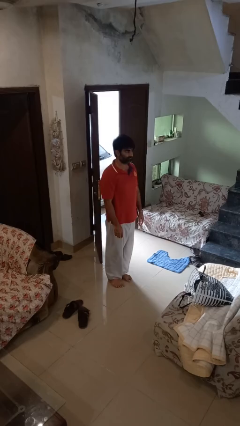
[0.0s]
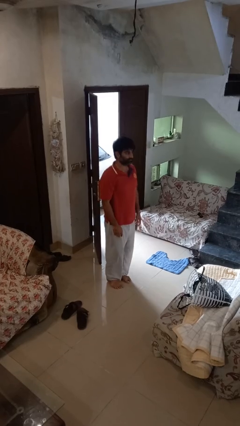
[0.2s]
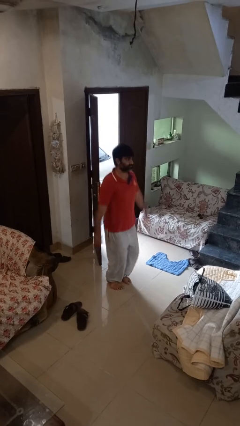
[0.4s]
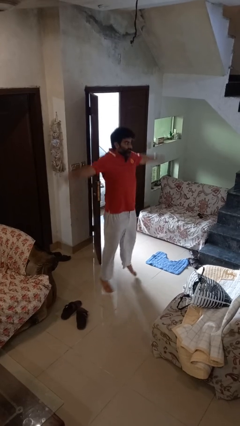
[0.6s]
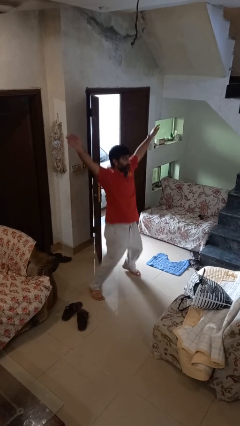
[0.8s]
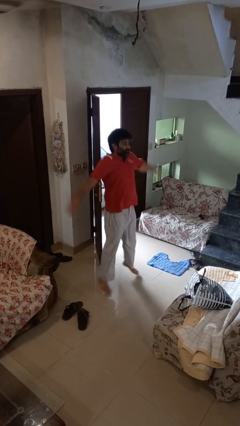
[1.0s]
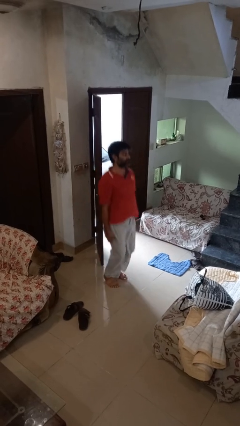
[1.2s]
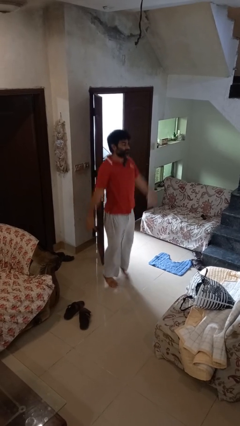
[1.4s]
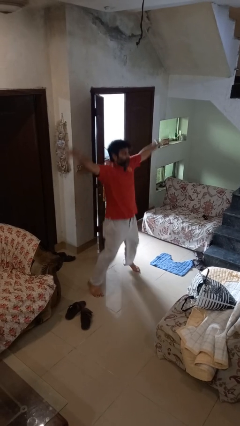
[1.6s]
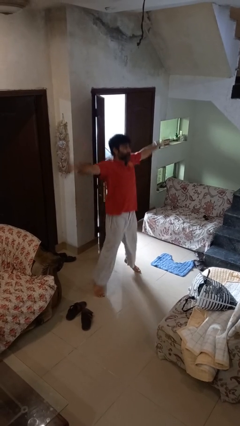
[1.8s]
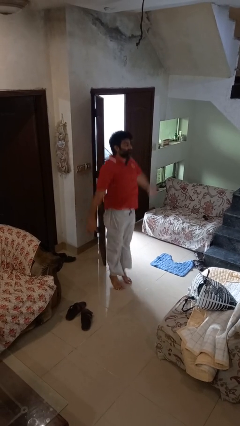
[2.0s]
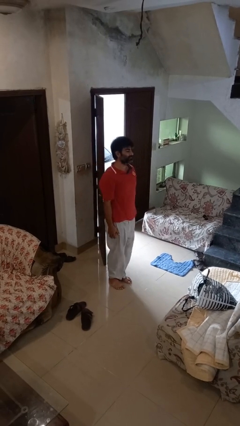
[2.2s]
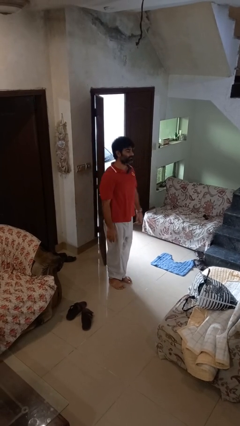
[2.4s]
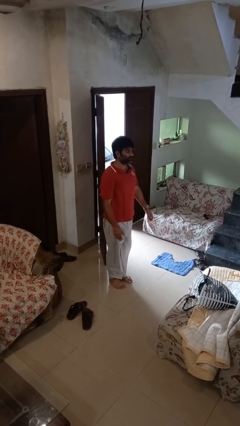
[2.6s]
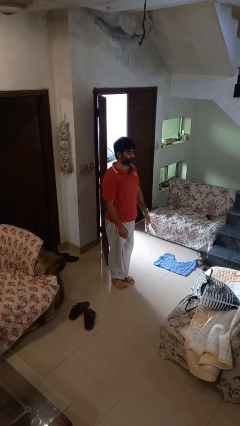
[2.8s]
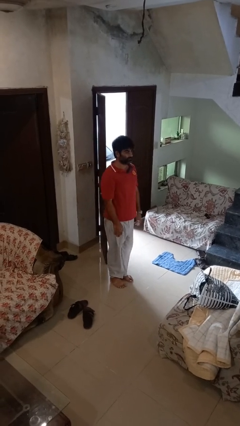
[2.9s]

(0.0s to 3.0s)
person exercises with jumping jacks

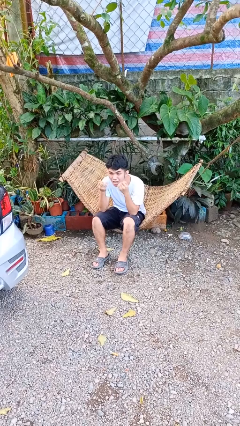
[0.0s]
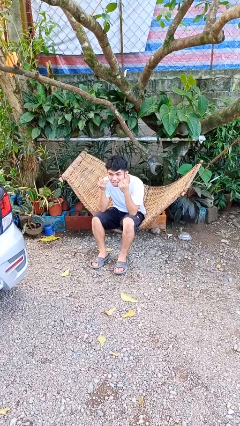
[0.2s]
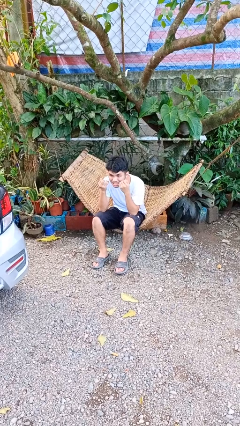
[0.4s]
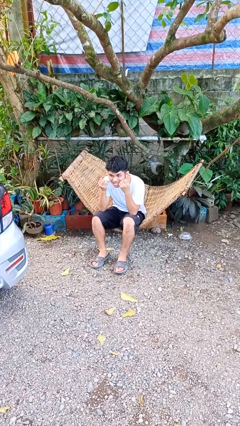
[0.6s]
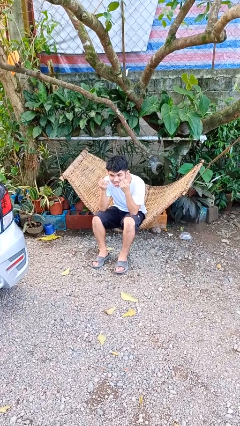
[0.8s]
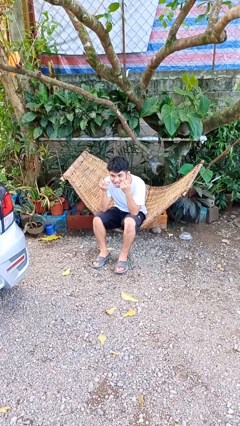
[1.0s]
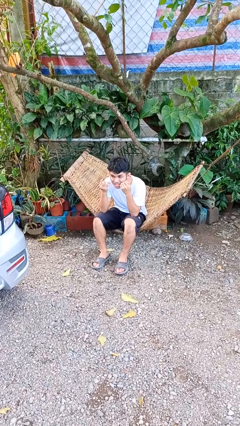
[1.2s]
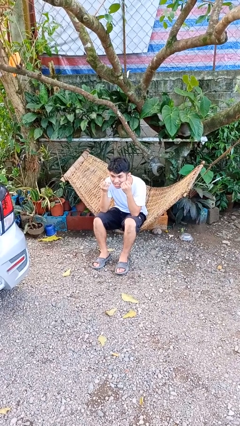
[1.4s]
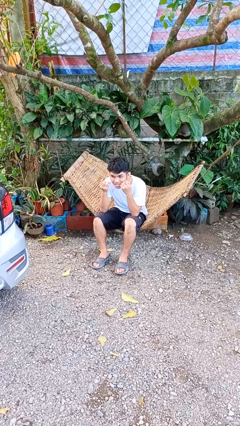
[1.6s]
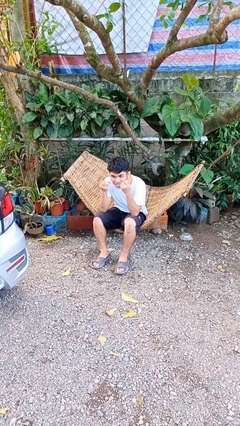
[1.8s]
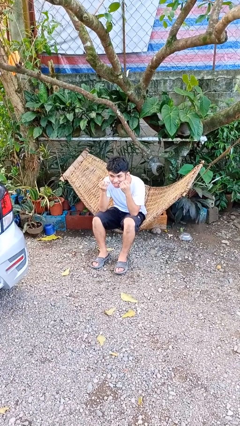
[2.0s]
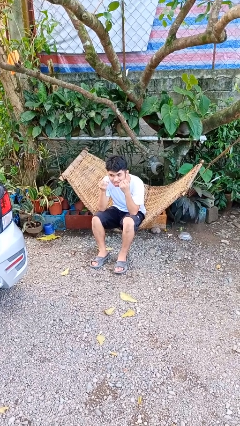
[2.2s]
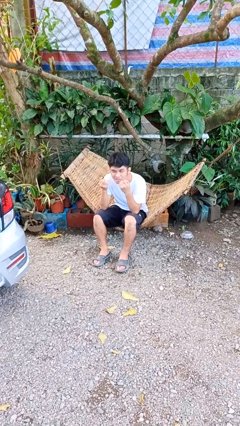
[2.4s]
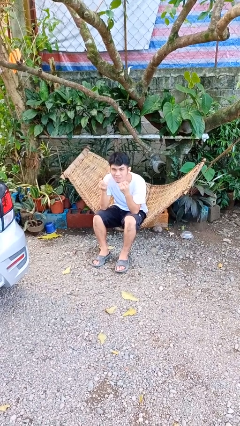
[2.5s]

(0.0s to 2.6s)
person flosses

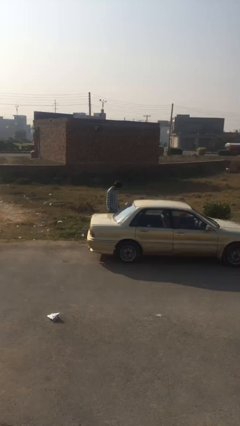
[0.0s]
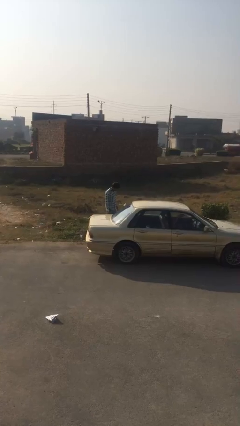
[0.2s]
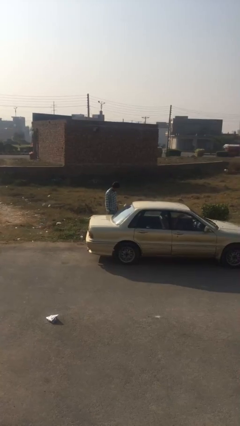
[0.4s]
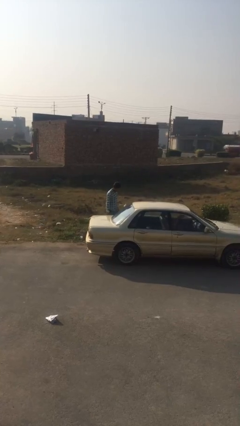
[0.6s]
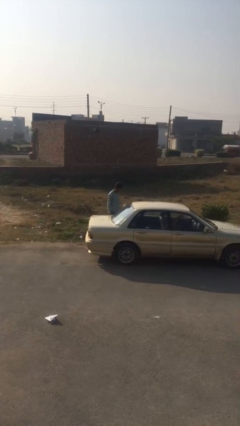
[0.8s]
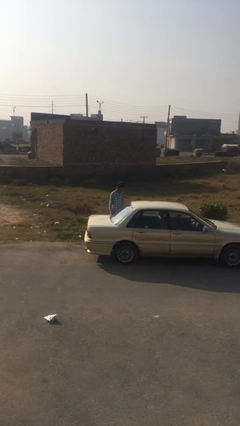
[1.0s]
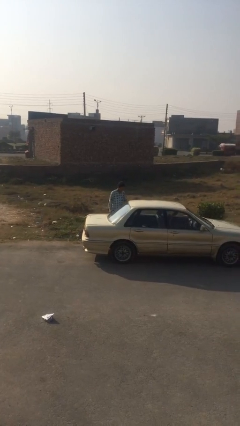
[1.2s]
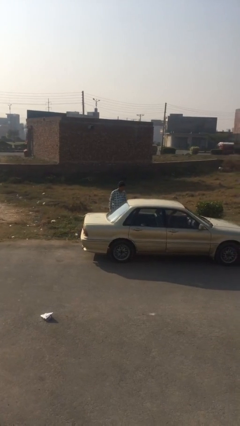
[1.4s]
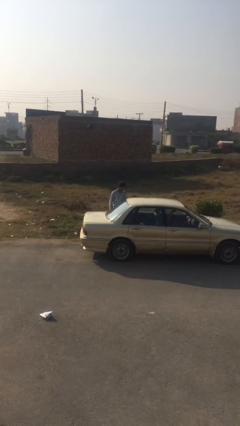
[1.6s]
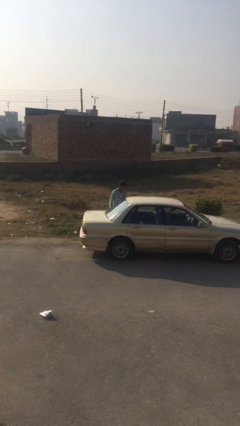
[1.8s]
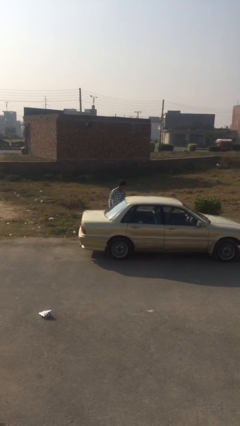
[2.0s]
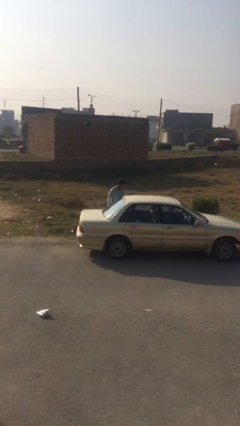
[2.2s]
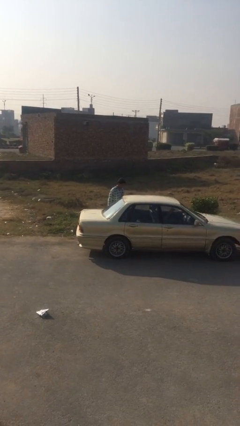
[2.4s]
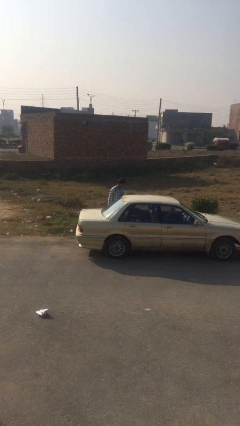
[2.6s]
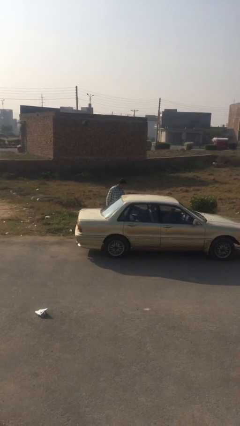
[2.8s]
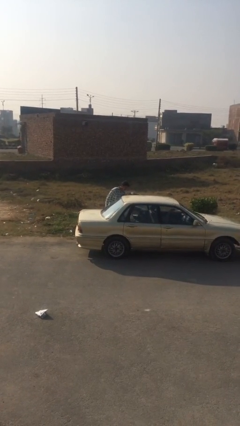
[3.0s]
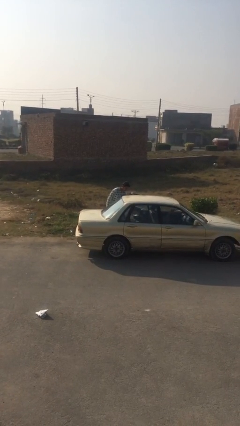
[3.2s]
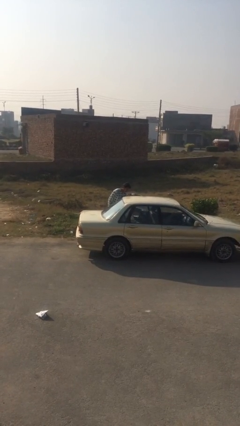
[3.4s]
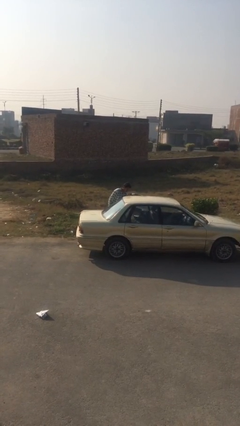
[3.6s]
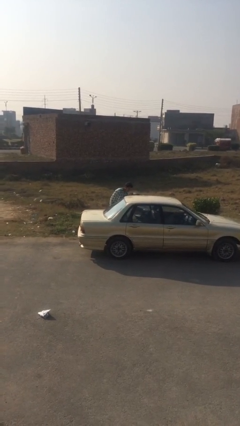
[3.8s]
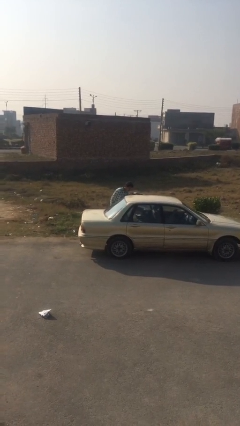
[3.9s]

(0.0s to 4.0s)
person opens car door

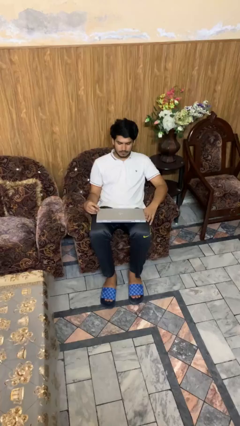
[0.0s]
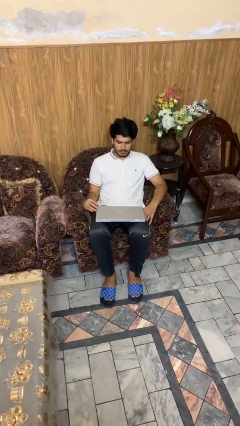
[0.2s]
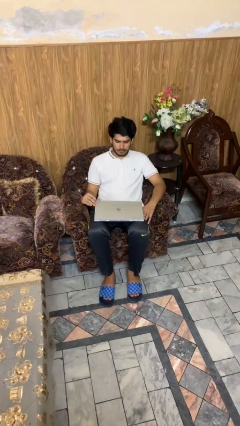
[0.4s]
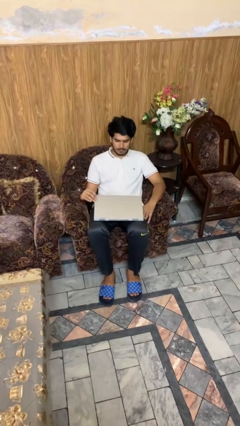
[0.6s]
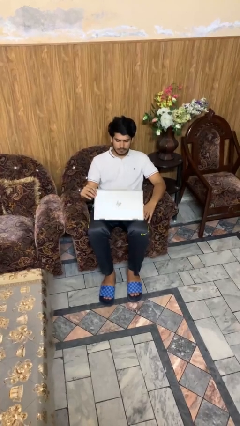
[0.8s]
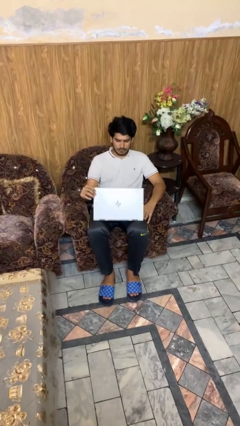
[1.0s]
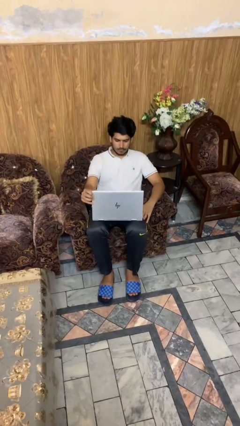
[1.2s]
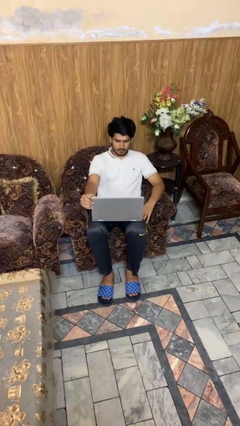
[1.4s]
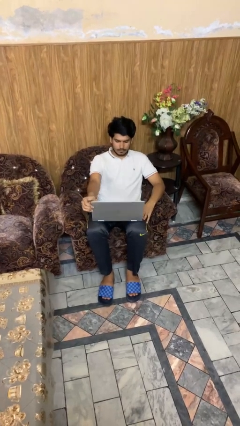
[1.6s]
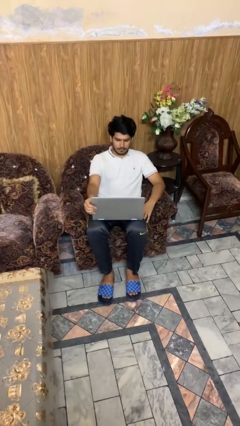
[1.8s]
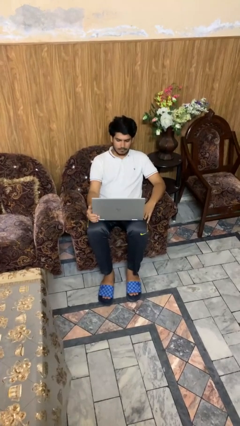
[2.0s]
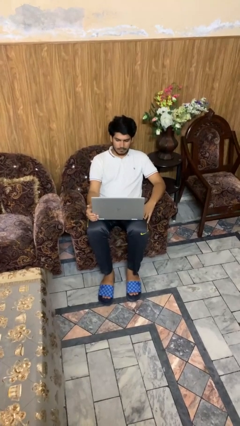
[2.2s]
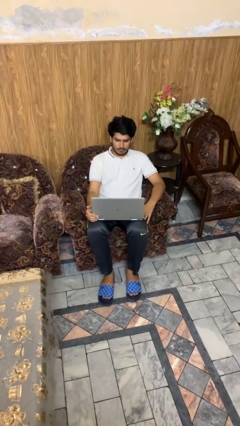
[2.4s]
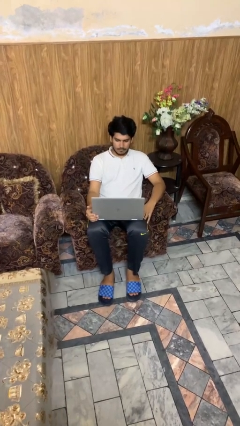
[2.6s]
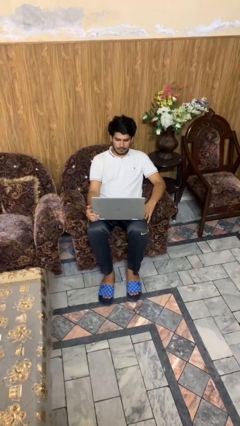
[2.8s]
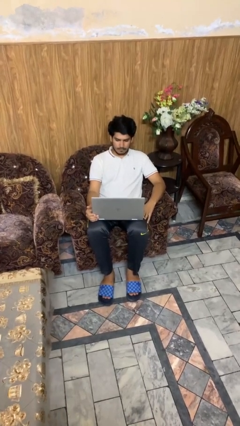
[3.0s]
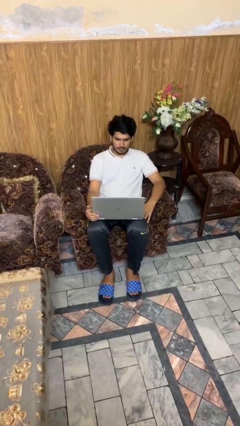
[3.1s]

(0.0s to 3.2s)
person opens laptop

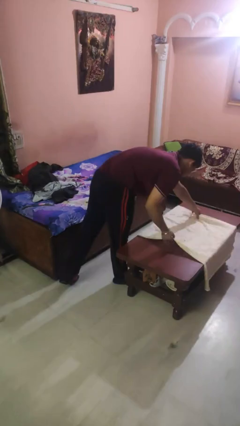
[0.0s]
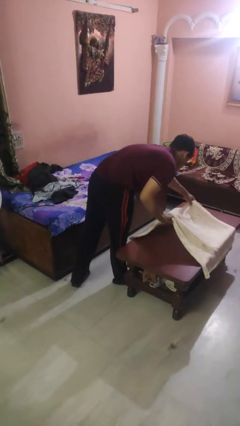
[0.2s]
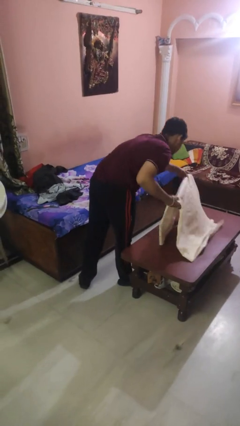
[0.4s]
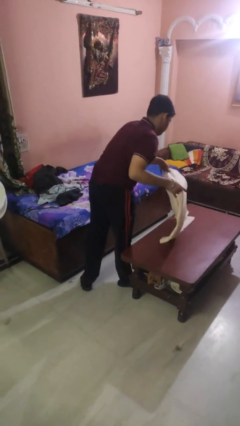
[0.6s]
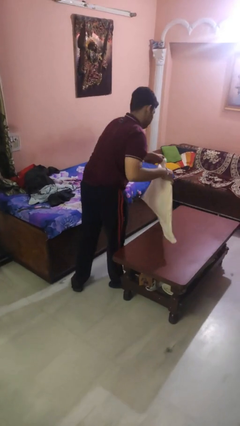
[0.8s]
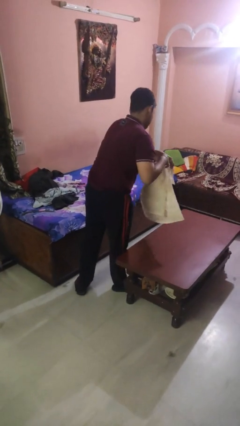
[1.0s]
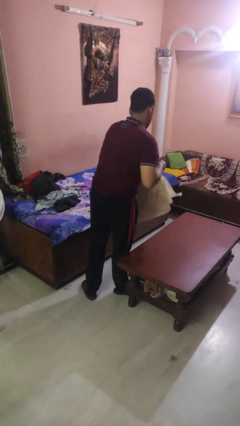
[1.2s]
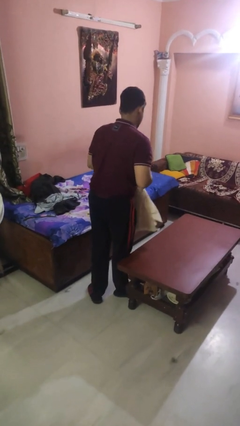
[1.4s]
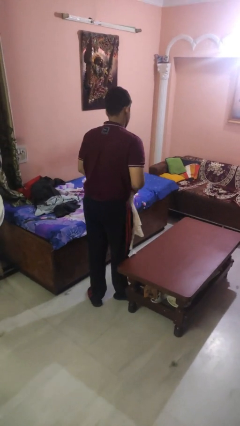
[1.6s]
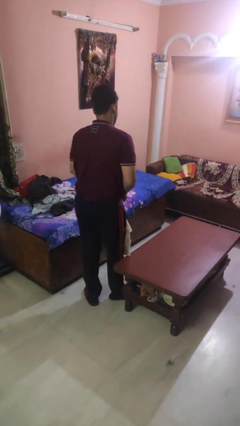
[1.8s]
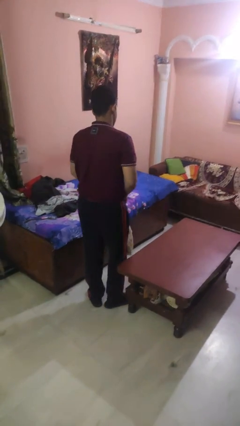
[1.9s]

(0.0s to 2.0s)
person folds tablecloth

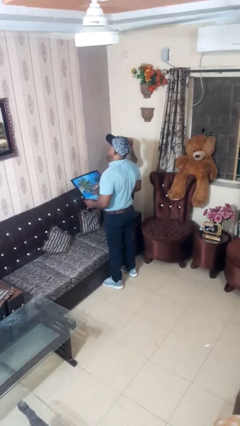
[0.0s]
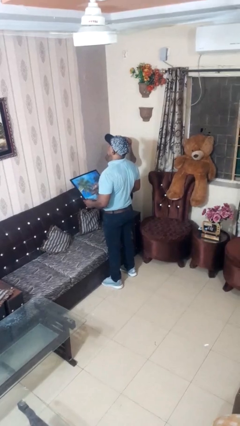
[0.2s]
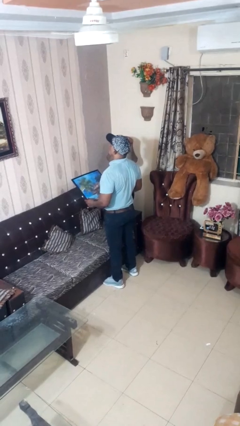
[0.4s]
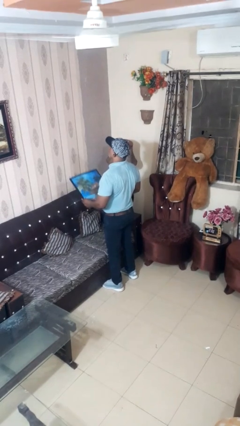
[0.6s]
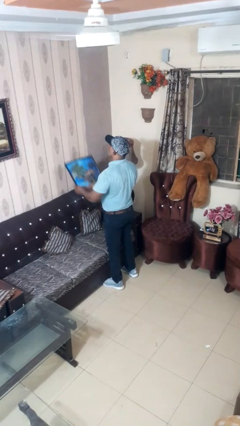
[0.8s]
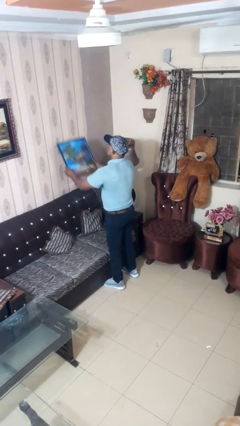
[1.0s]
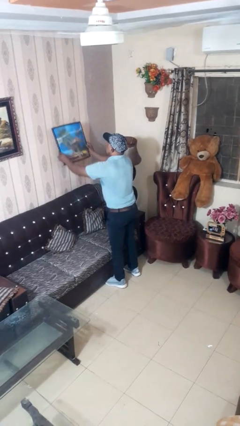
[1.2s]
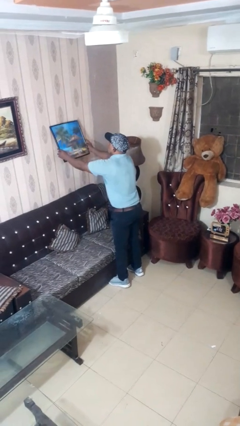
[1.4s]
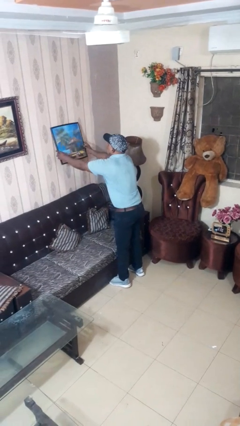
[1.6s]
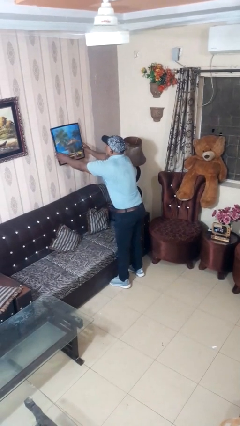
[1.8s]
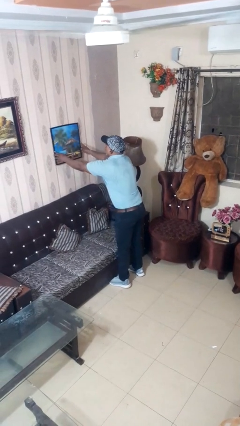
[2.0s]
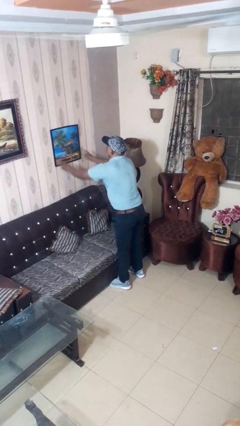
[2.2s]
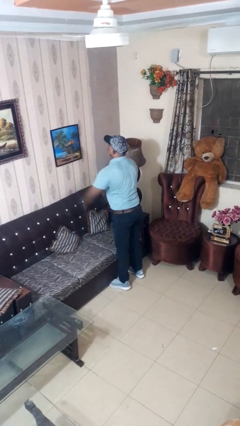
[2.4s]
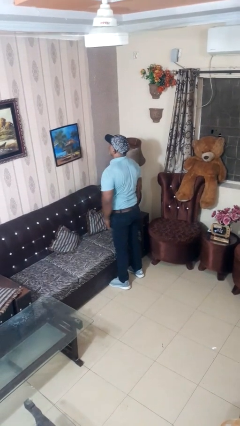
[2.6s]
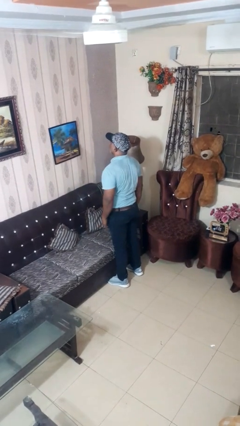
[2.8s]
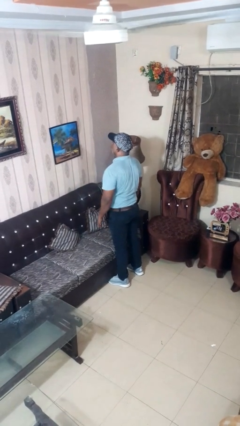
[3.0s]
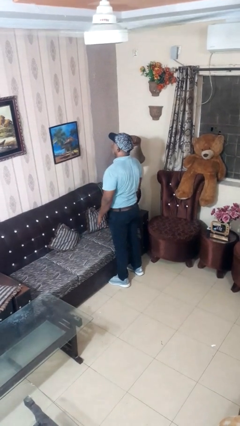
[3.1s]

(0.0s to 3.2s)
person puts up picture frame
